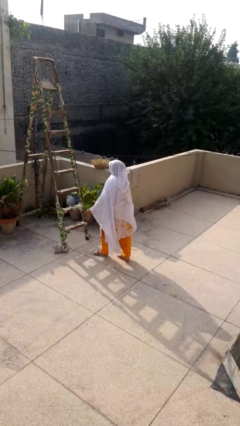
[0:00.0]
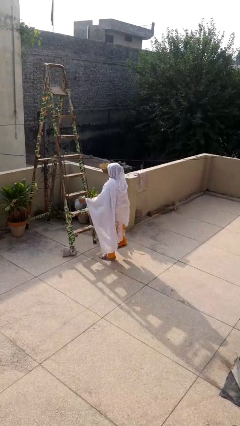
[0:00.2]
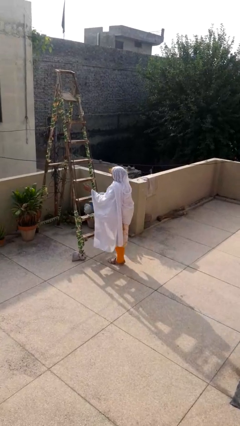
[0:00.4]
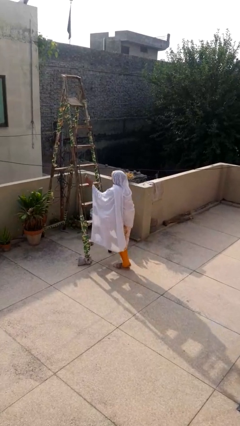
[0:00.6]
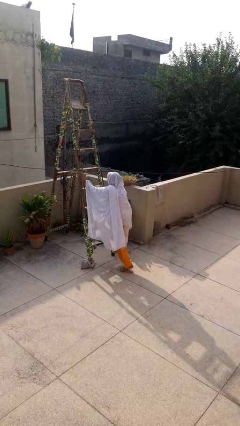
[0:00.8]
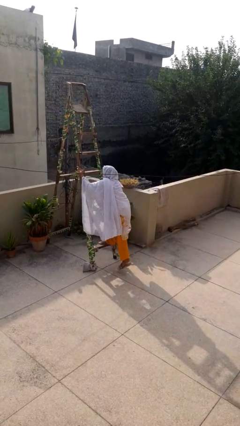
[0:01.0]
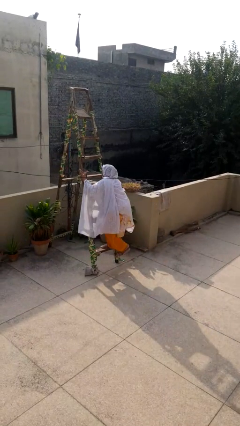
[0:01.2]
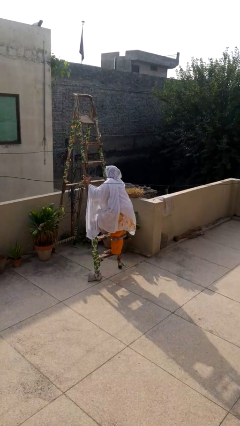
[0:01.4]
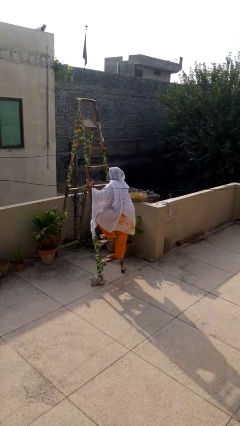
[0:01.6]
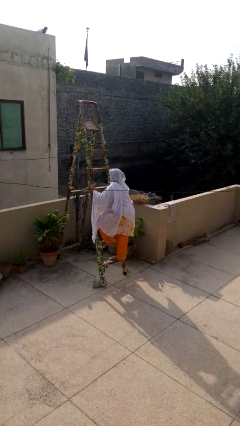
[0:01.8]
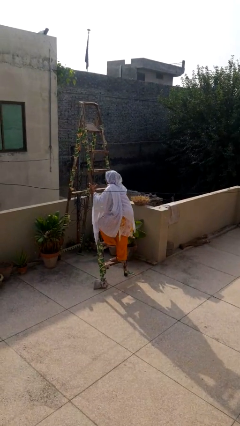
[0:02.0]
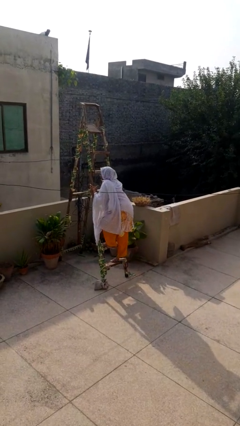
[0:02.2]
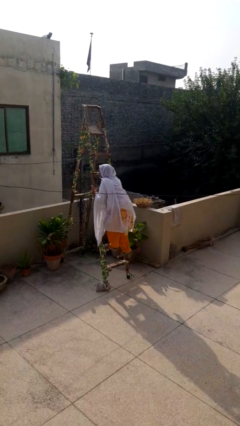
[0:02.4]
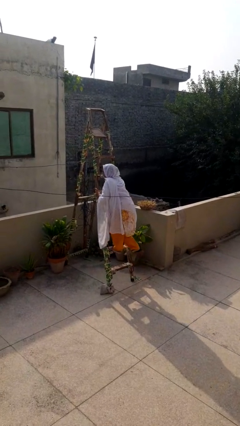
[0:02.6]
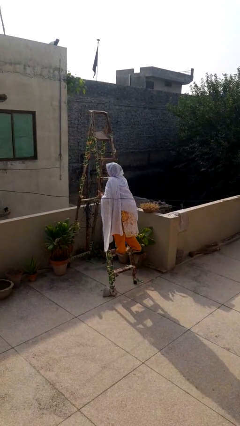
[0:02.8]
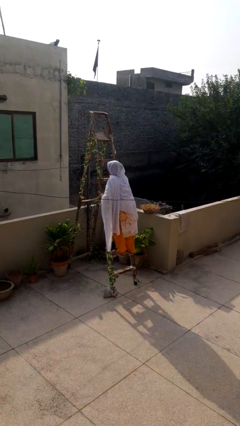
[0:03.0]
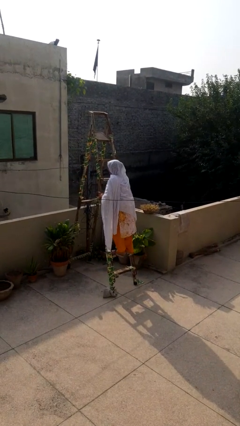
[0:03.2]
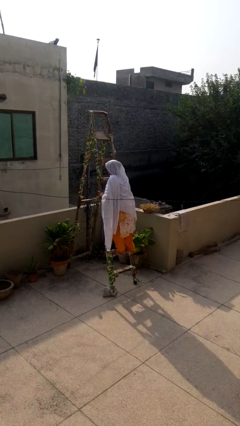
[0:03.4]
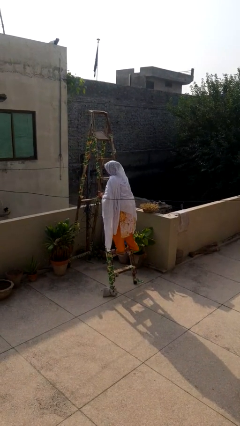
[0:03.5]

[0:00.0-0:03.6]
person climbs up ladder

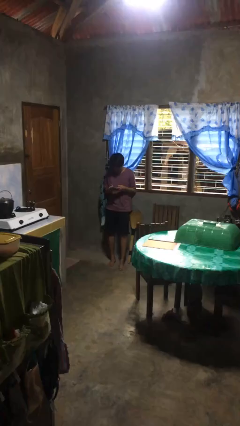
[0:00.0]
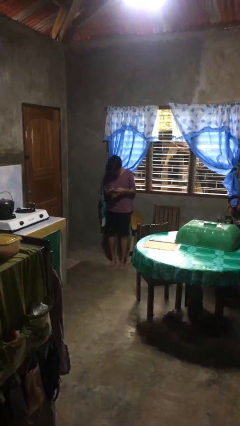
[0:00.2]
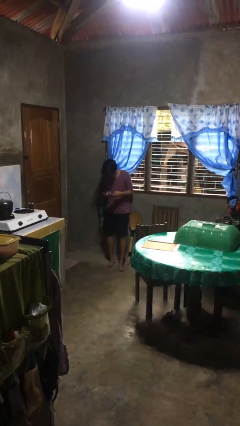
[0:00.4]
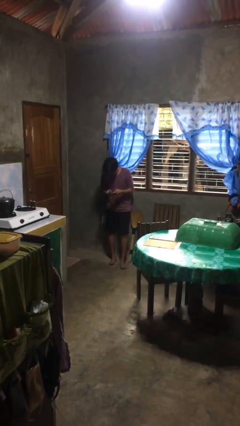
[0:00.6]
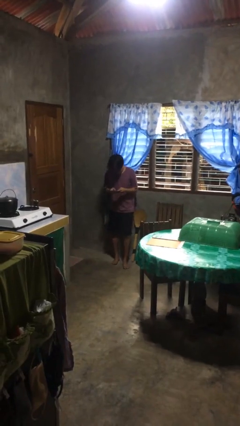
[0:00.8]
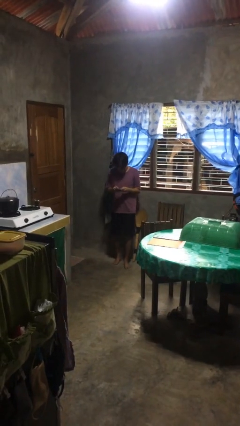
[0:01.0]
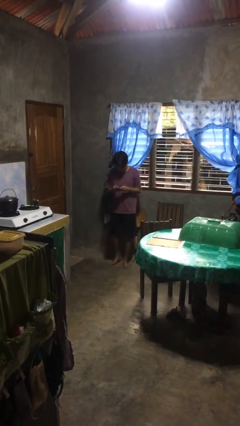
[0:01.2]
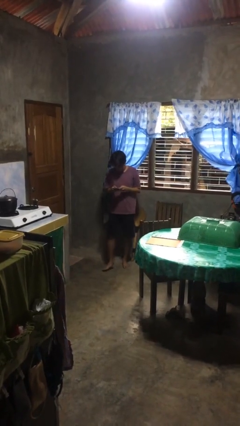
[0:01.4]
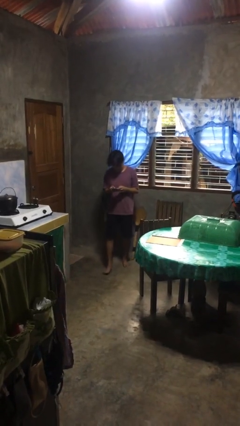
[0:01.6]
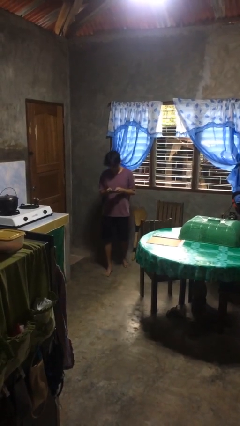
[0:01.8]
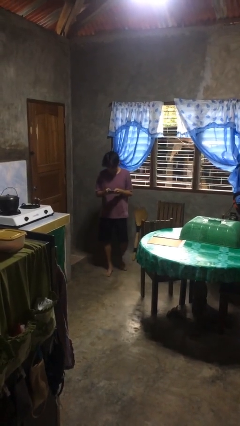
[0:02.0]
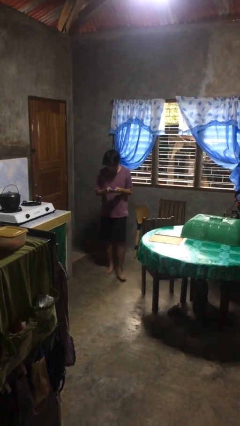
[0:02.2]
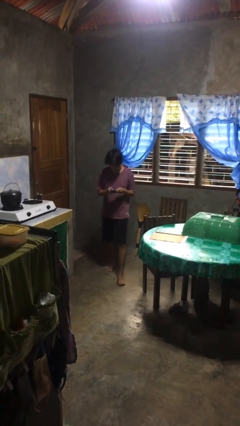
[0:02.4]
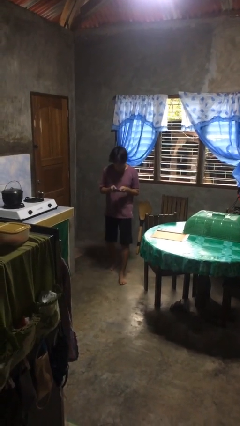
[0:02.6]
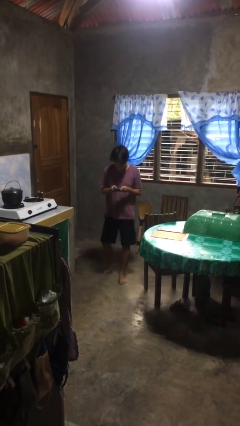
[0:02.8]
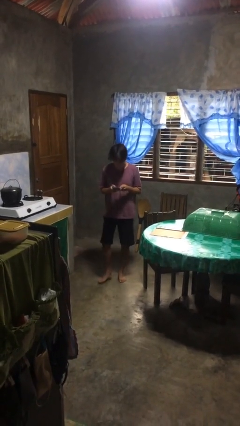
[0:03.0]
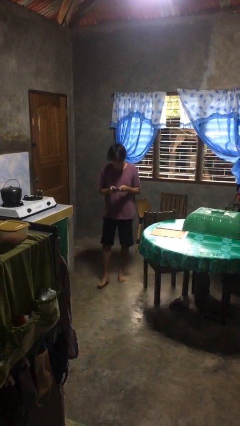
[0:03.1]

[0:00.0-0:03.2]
person texts on phone

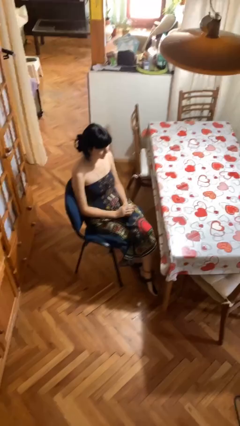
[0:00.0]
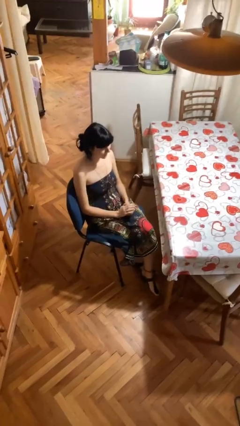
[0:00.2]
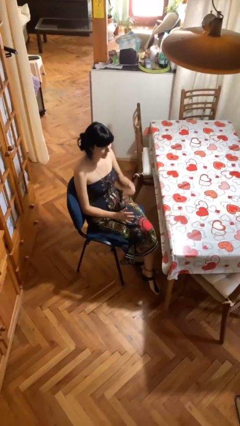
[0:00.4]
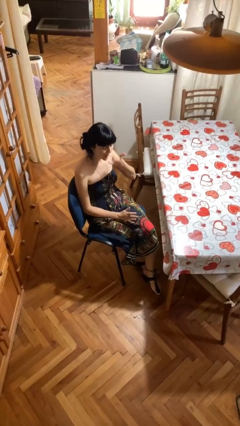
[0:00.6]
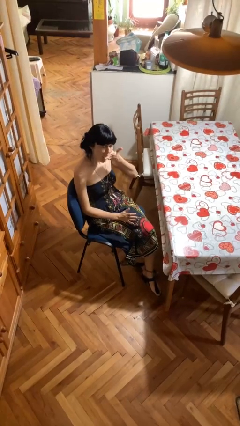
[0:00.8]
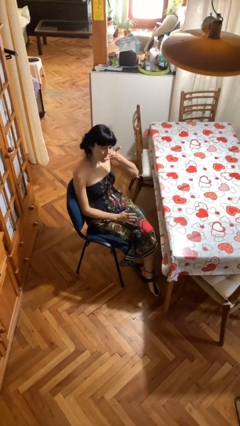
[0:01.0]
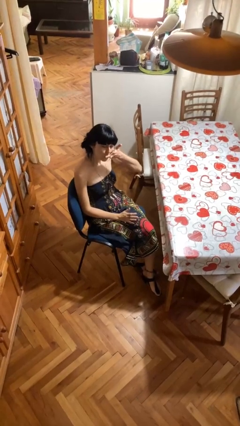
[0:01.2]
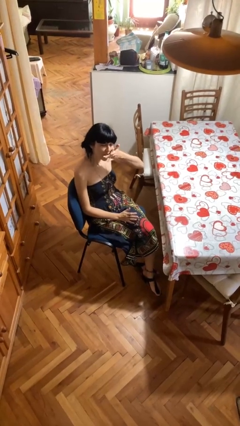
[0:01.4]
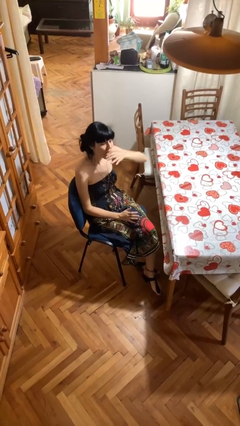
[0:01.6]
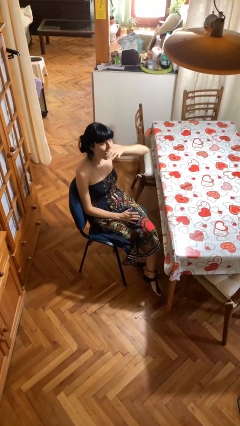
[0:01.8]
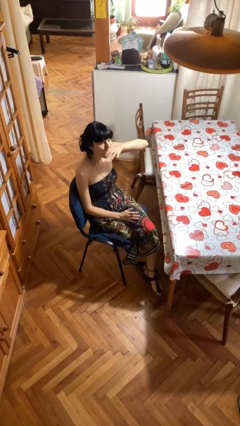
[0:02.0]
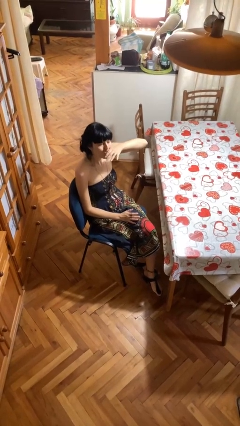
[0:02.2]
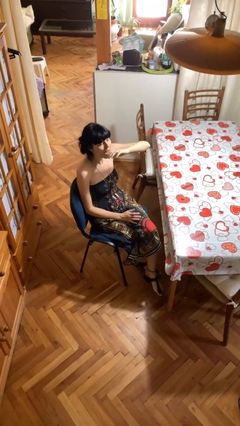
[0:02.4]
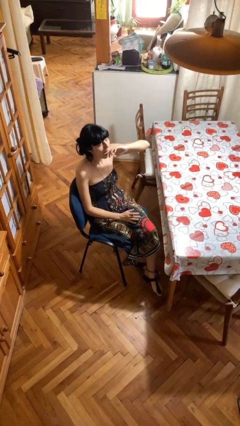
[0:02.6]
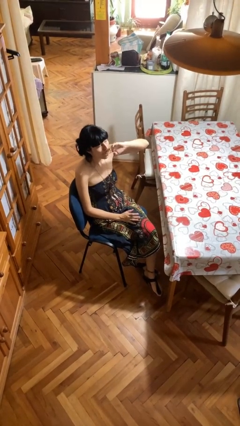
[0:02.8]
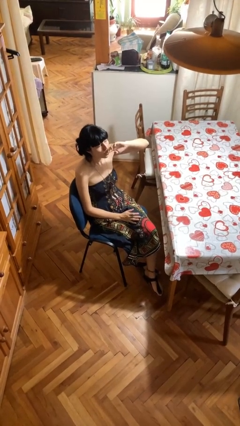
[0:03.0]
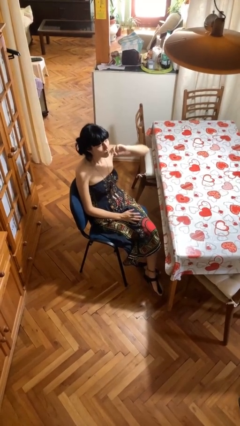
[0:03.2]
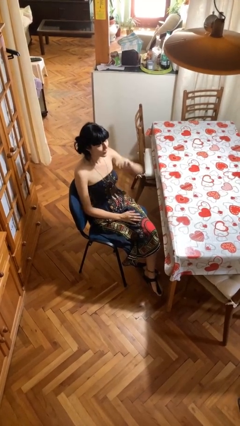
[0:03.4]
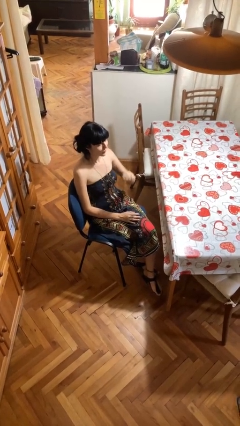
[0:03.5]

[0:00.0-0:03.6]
person licks fingers

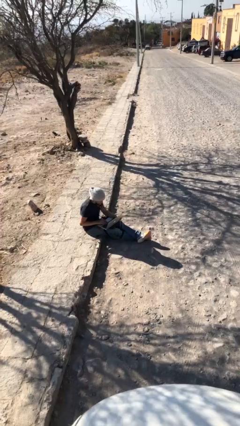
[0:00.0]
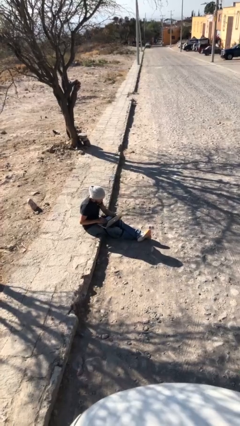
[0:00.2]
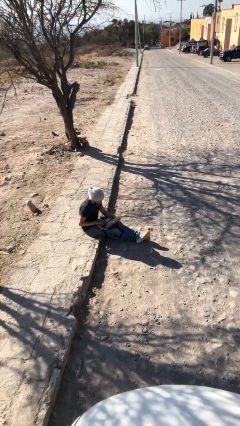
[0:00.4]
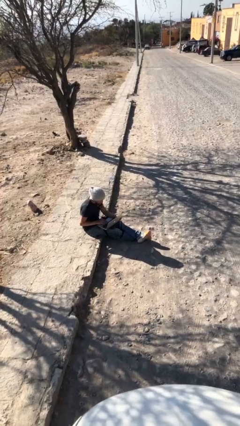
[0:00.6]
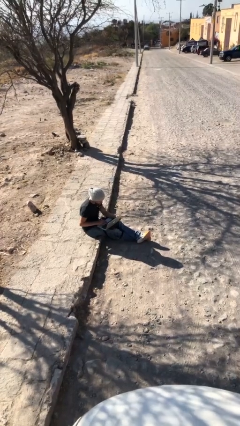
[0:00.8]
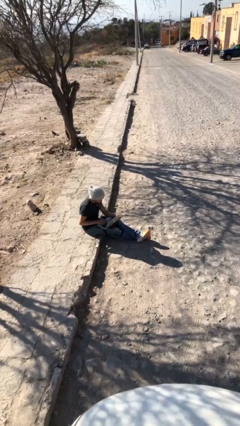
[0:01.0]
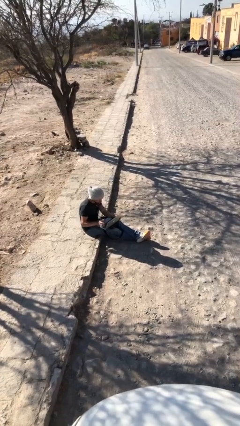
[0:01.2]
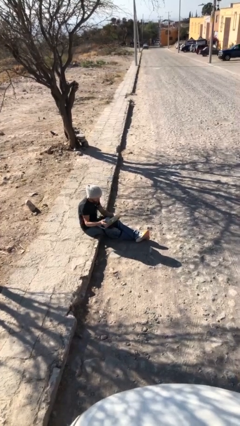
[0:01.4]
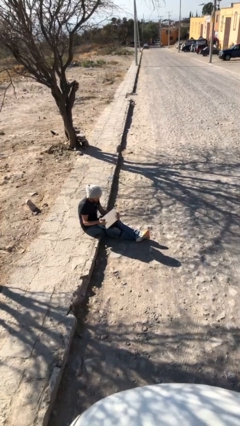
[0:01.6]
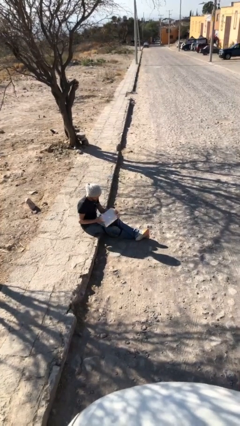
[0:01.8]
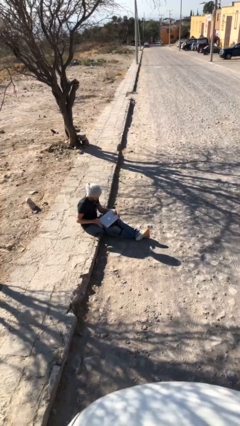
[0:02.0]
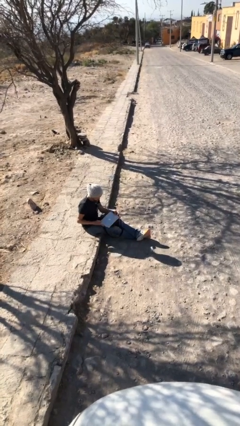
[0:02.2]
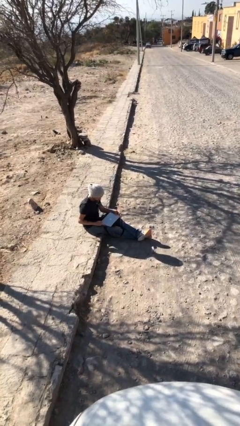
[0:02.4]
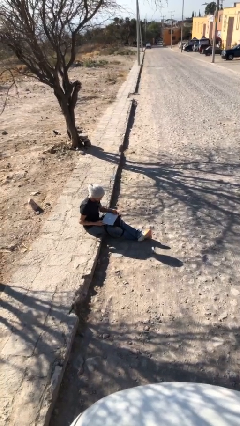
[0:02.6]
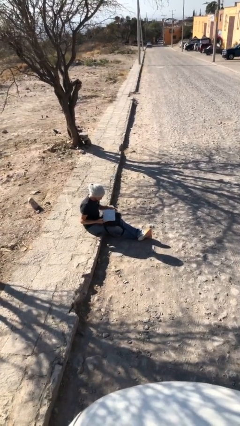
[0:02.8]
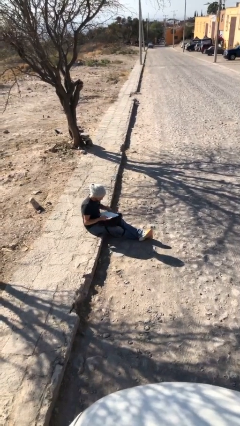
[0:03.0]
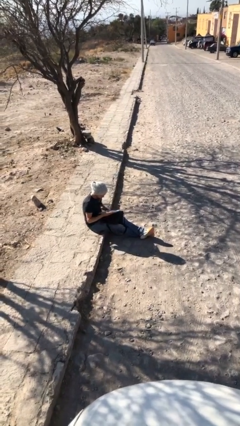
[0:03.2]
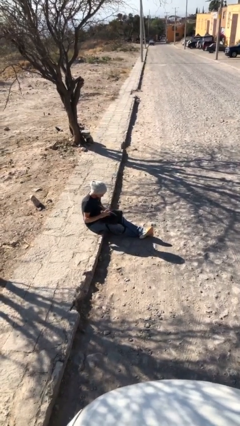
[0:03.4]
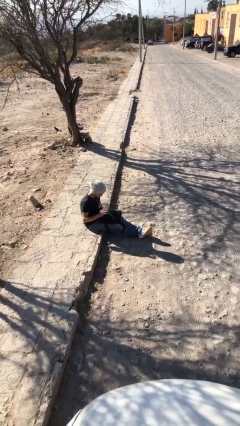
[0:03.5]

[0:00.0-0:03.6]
person interacts with laptop

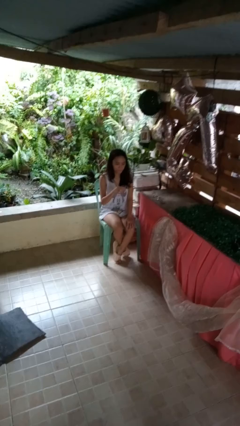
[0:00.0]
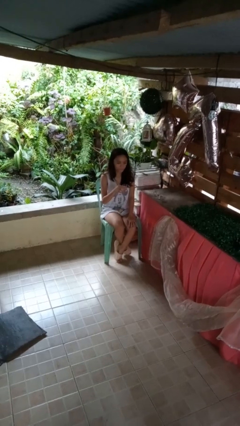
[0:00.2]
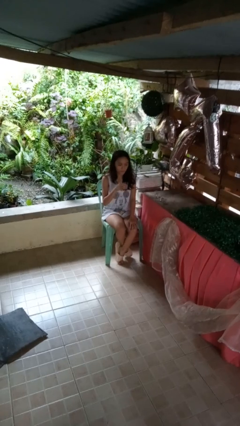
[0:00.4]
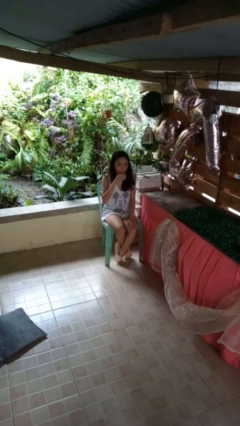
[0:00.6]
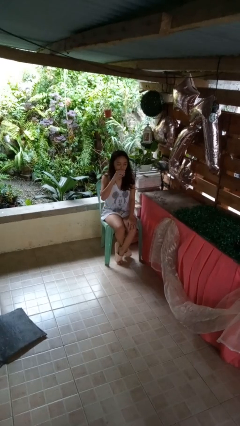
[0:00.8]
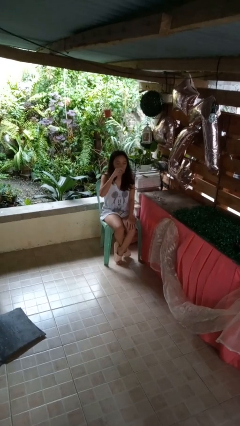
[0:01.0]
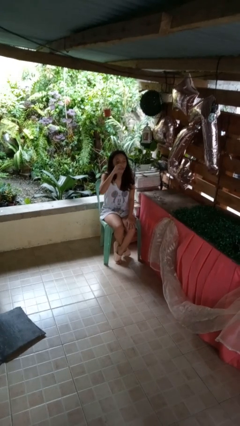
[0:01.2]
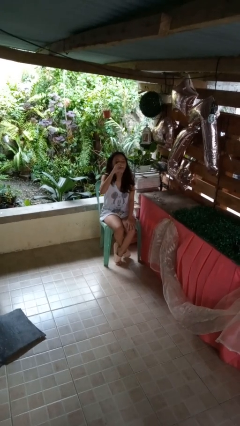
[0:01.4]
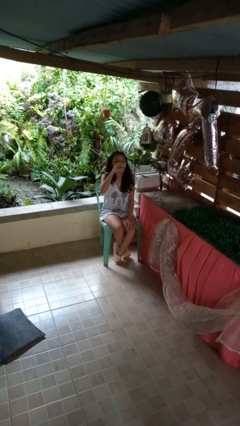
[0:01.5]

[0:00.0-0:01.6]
person drinks from shotglass

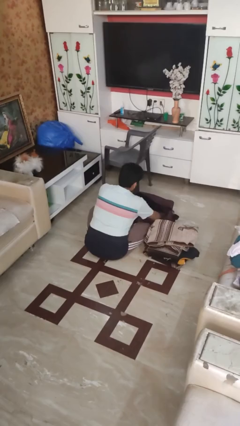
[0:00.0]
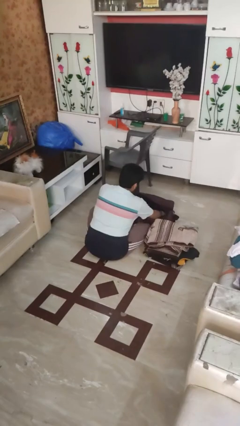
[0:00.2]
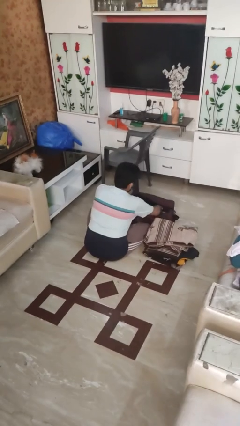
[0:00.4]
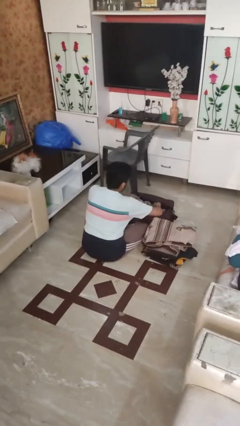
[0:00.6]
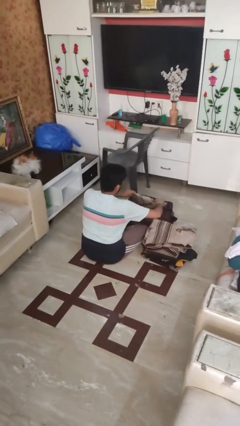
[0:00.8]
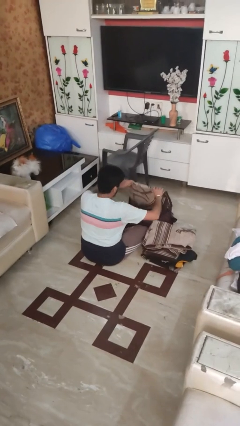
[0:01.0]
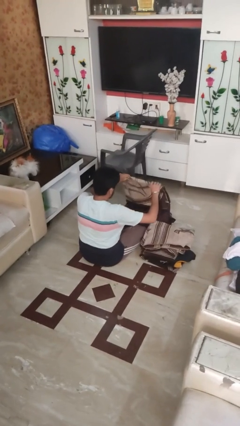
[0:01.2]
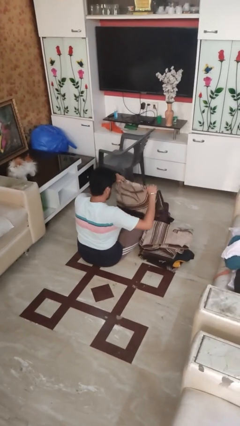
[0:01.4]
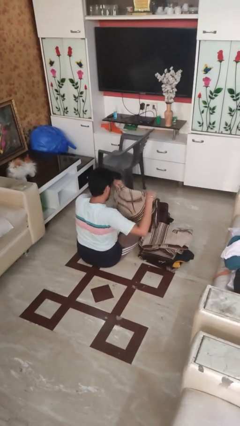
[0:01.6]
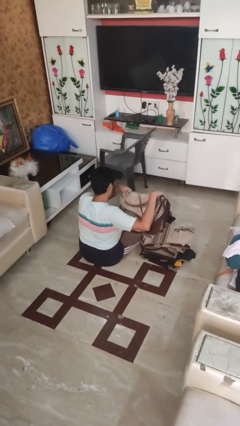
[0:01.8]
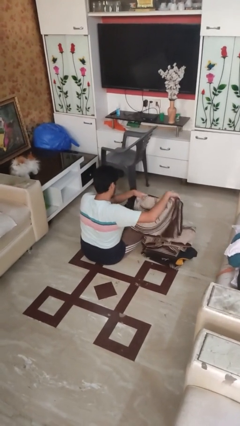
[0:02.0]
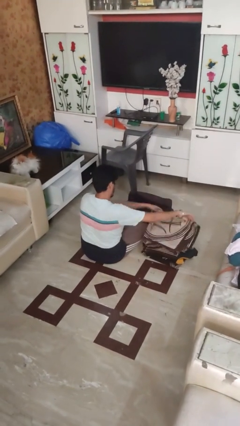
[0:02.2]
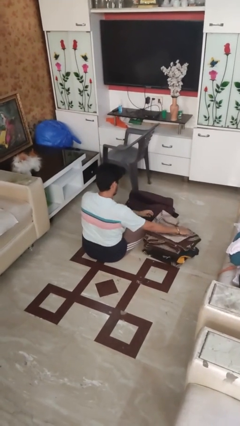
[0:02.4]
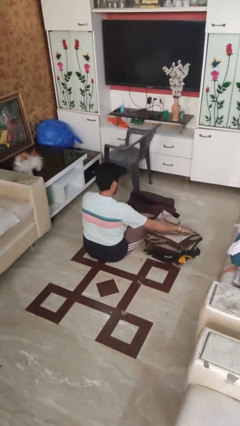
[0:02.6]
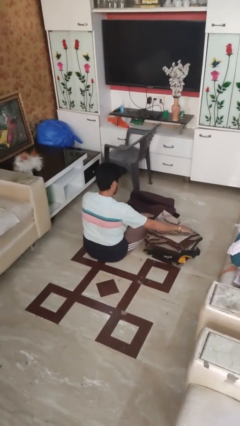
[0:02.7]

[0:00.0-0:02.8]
person unloads clothes from suitcase
